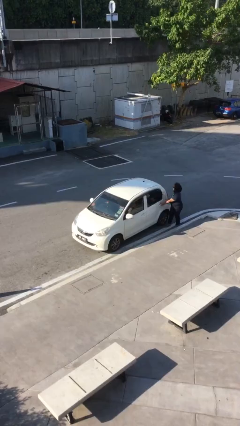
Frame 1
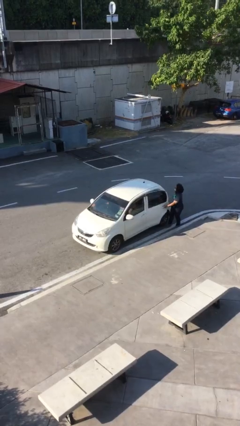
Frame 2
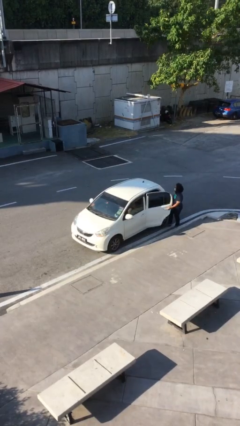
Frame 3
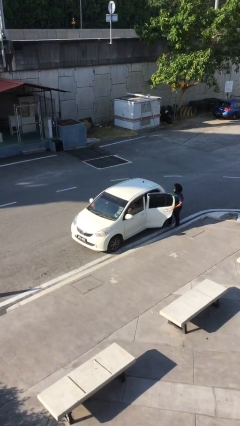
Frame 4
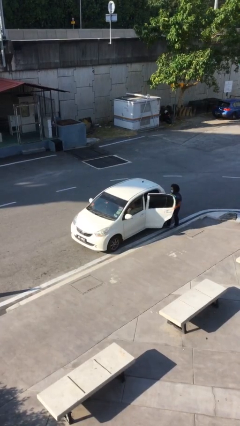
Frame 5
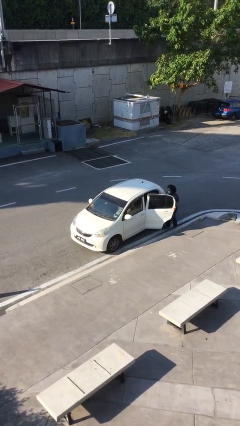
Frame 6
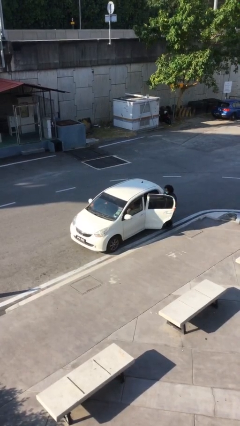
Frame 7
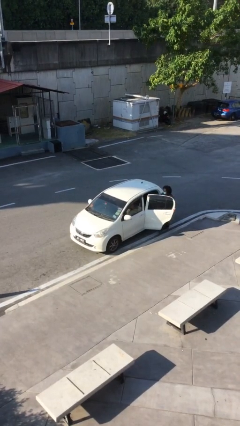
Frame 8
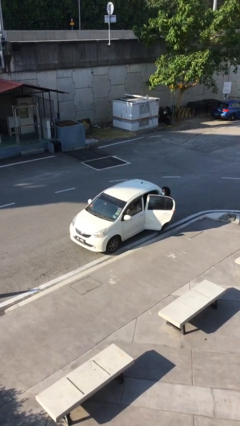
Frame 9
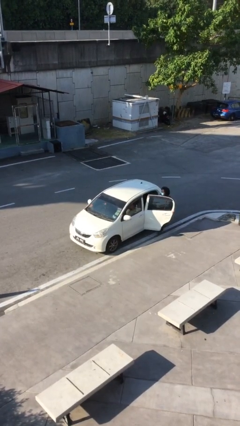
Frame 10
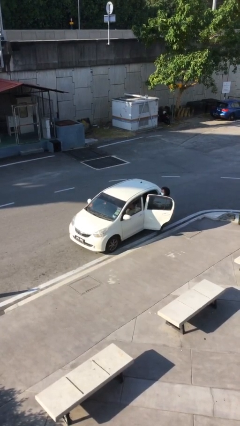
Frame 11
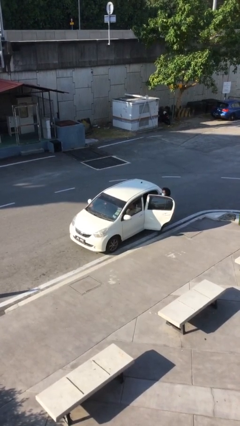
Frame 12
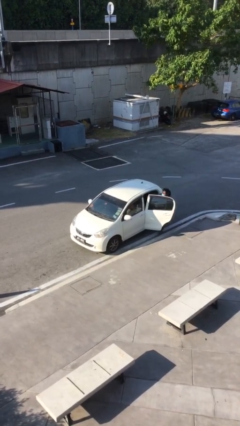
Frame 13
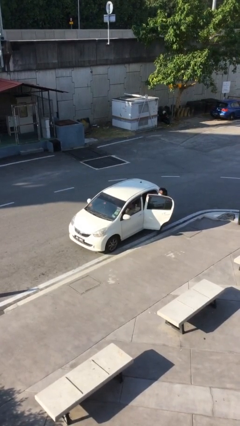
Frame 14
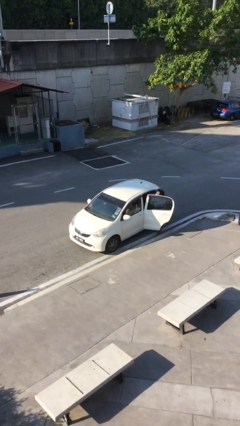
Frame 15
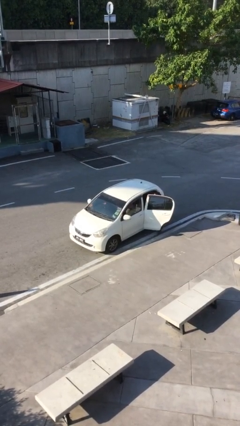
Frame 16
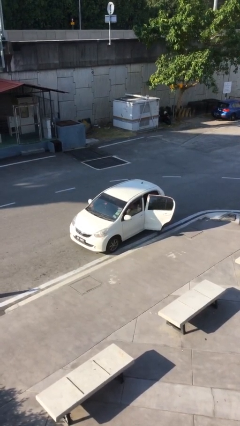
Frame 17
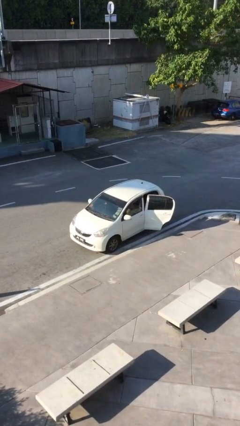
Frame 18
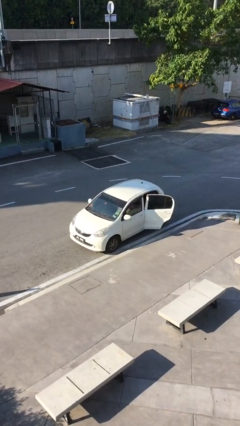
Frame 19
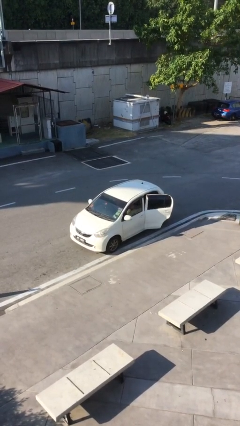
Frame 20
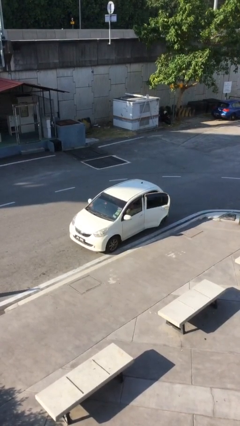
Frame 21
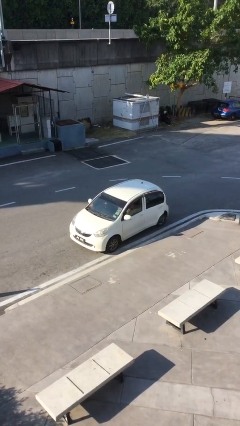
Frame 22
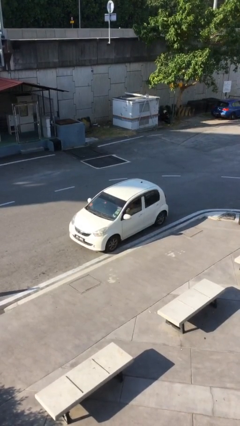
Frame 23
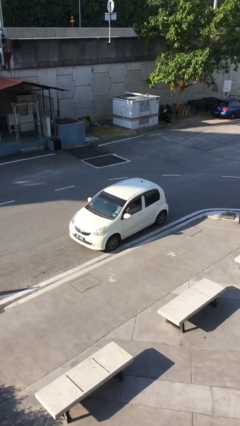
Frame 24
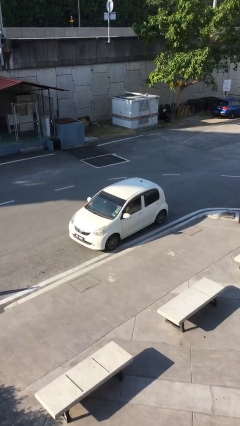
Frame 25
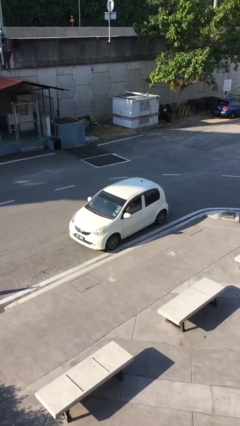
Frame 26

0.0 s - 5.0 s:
car picks up person

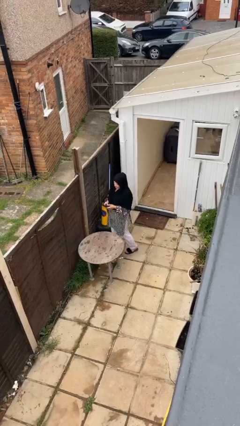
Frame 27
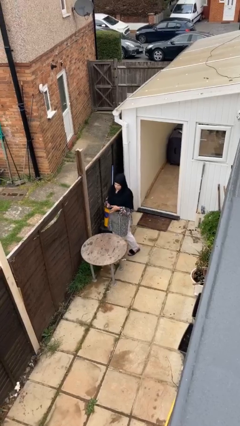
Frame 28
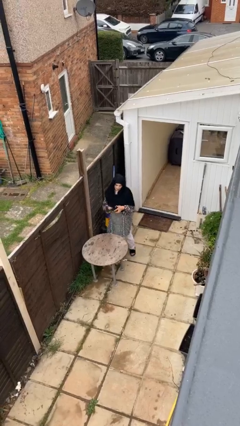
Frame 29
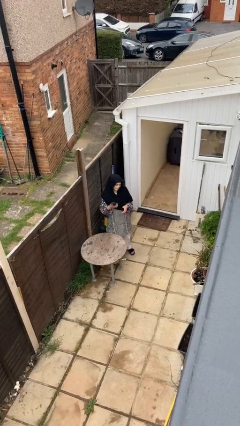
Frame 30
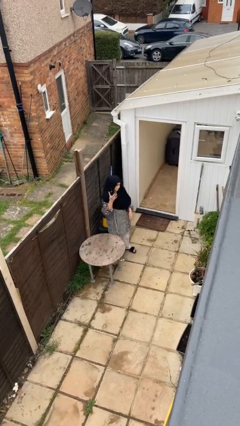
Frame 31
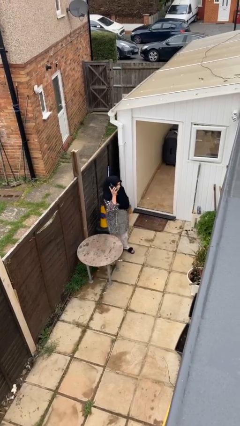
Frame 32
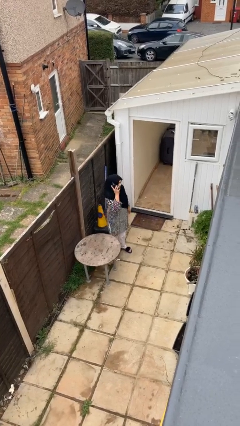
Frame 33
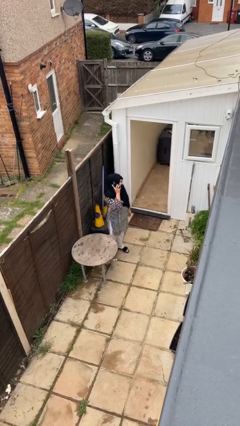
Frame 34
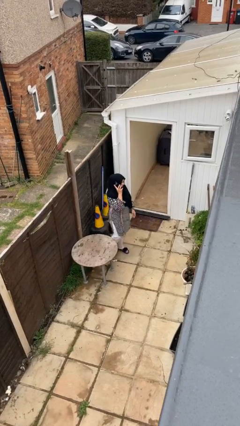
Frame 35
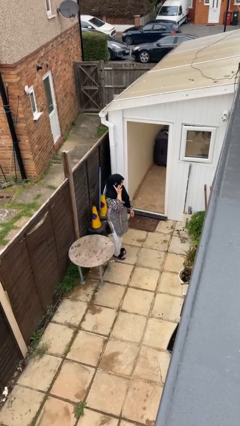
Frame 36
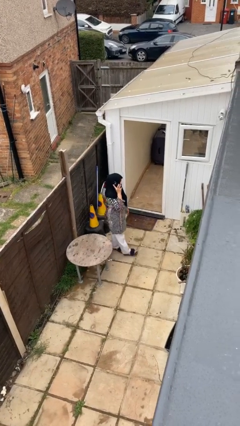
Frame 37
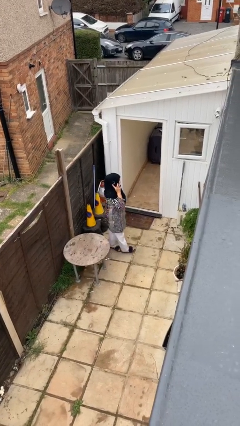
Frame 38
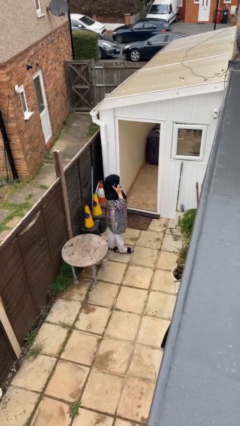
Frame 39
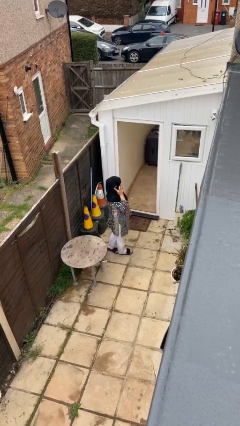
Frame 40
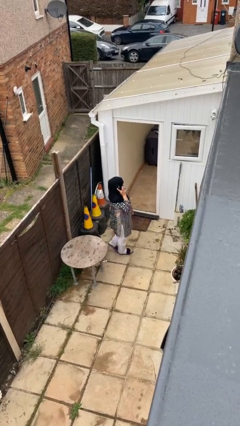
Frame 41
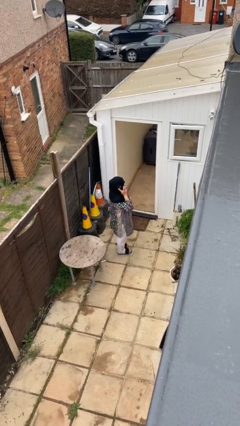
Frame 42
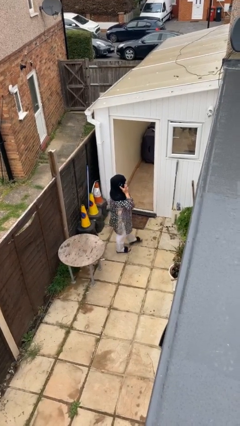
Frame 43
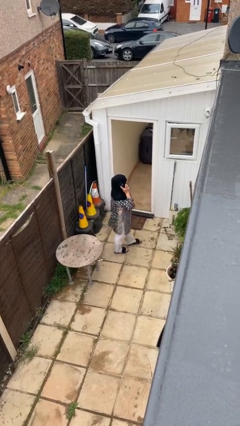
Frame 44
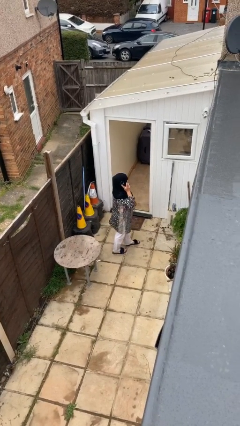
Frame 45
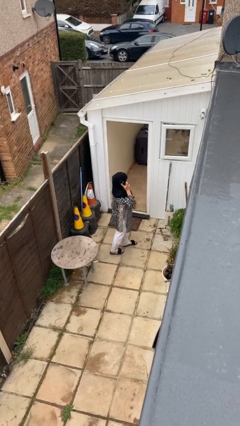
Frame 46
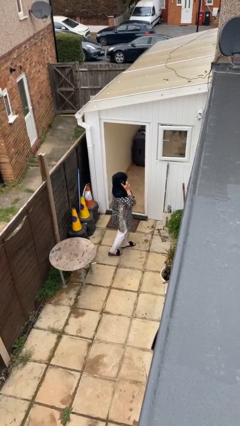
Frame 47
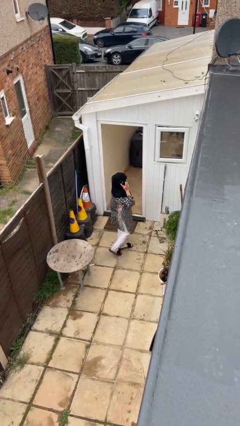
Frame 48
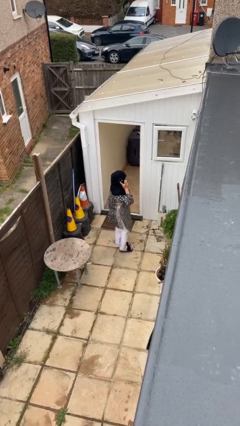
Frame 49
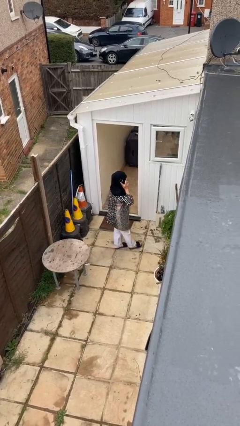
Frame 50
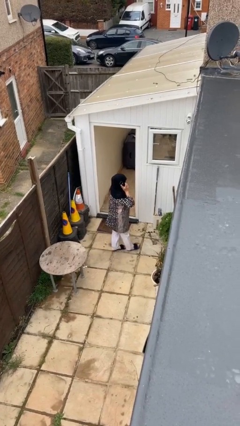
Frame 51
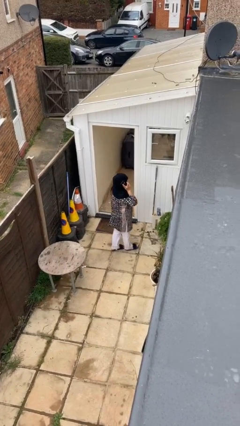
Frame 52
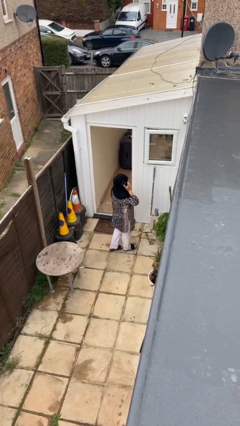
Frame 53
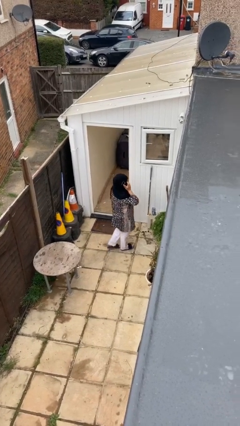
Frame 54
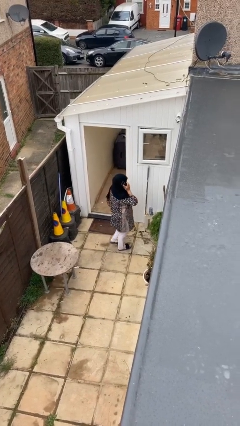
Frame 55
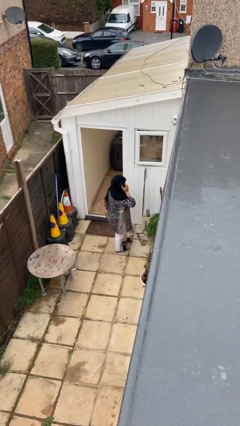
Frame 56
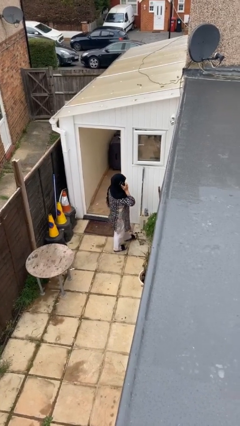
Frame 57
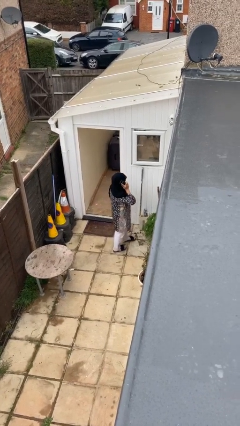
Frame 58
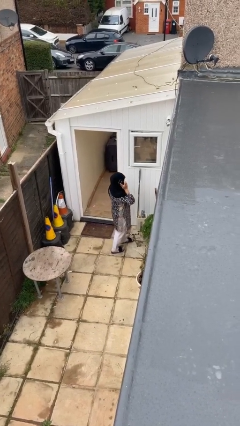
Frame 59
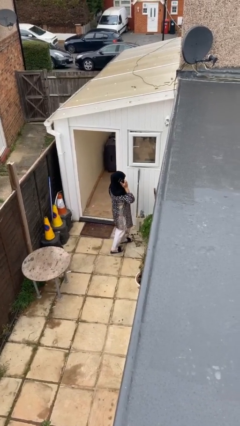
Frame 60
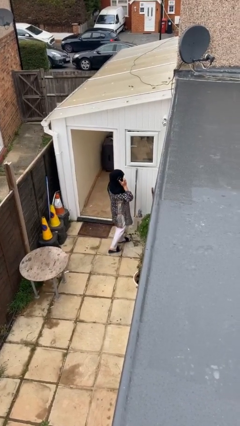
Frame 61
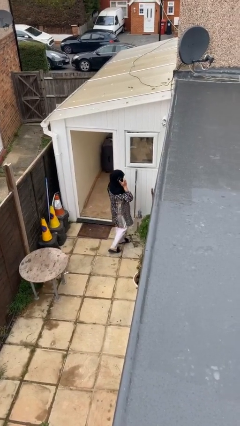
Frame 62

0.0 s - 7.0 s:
person talks on phone

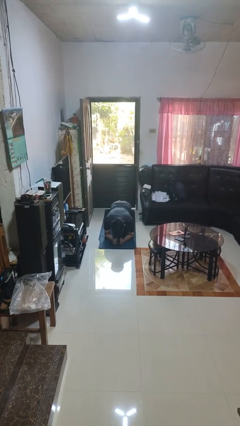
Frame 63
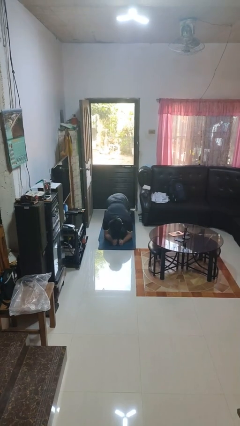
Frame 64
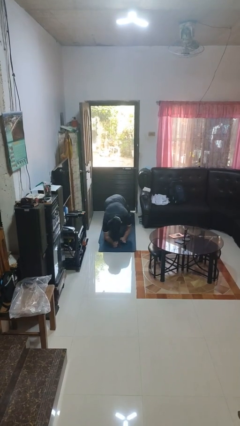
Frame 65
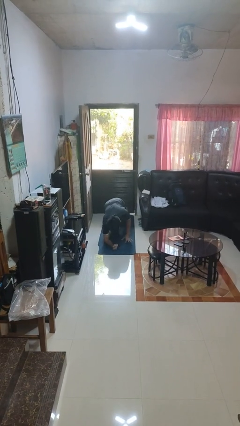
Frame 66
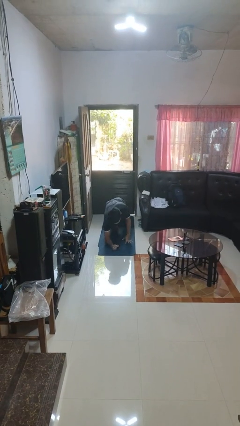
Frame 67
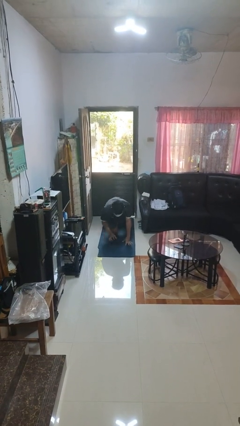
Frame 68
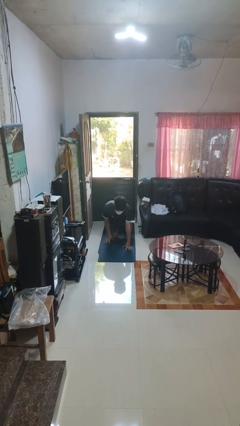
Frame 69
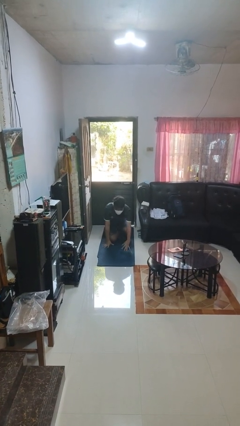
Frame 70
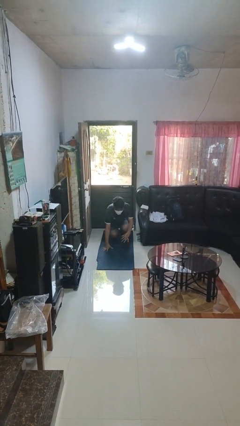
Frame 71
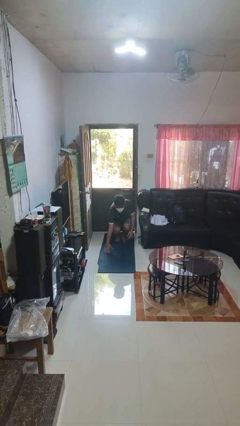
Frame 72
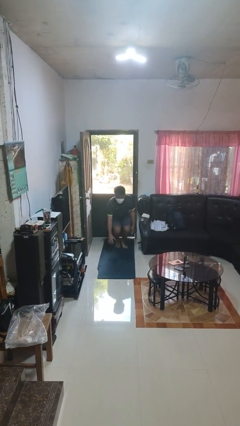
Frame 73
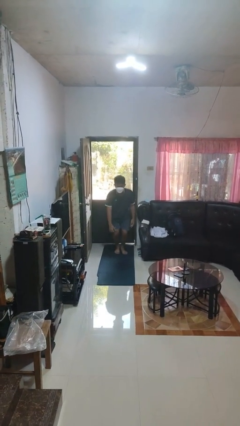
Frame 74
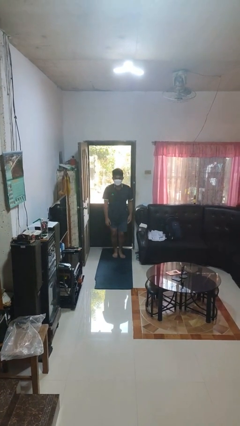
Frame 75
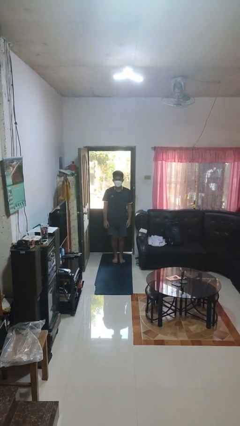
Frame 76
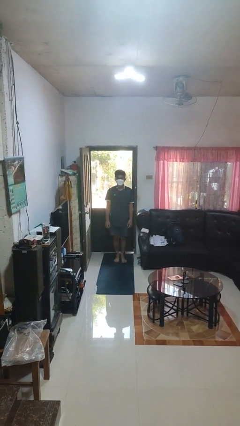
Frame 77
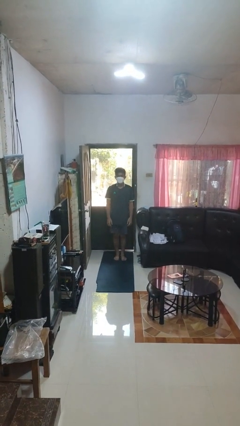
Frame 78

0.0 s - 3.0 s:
person stands up from floor

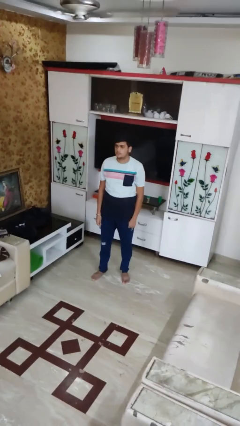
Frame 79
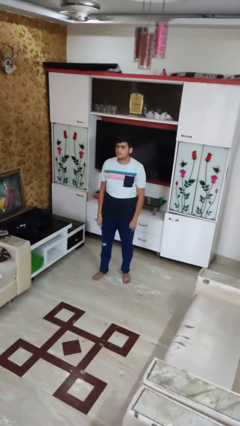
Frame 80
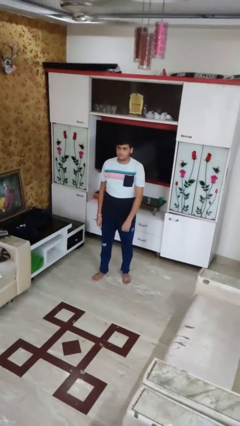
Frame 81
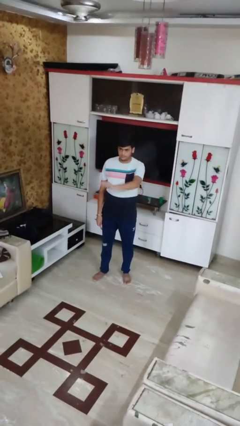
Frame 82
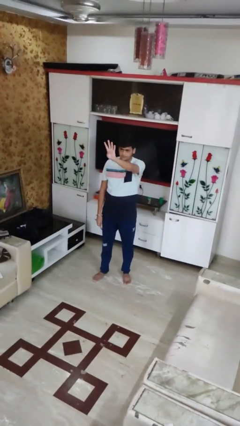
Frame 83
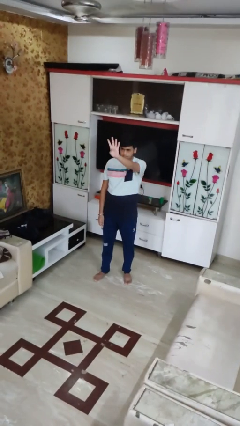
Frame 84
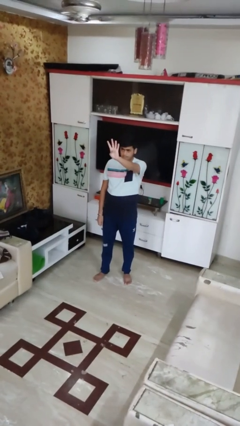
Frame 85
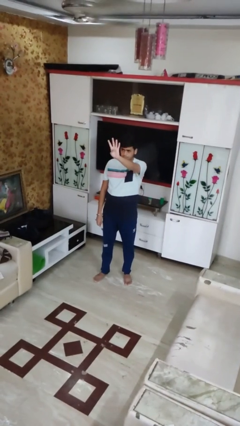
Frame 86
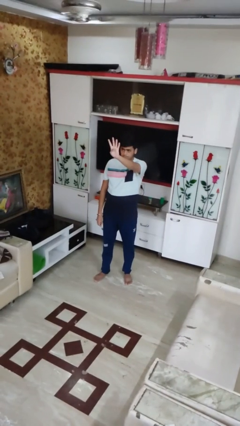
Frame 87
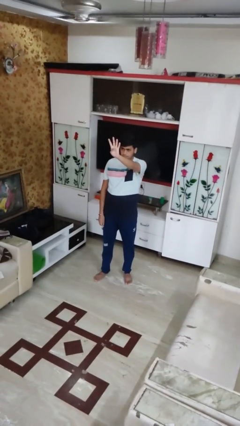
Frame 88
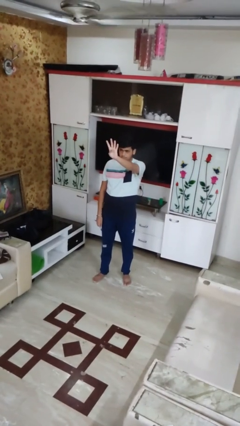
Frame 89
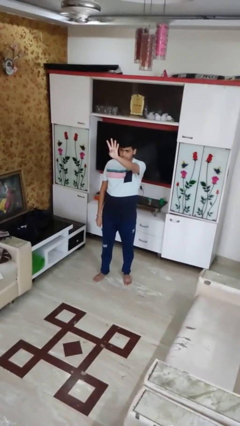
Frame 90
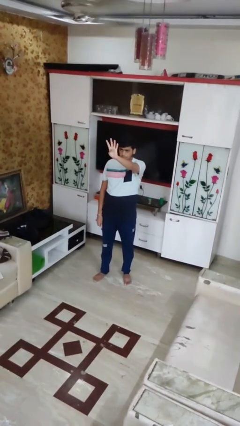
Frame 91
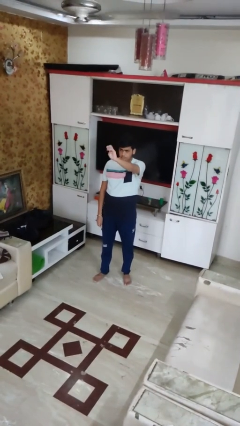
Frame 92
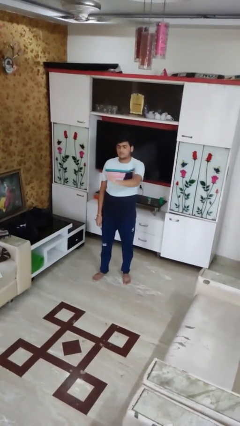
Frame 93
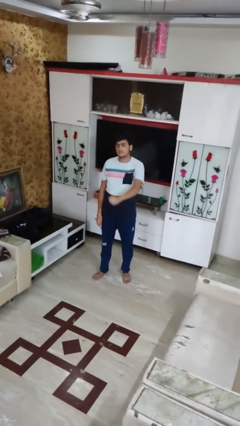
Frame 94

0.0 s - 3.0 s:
person gestures number four
